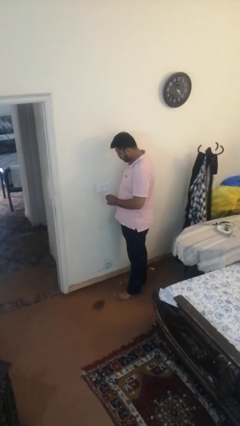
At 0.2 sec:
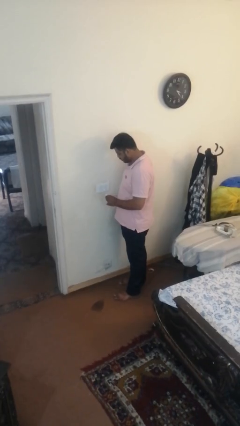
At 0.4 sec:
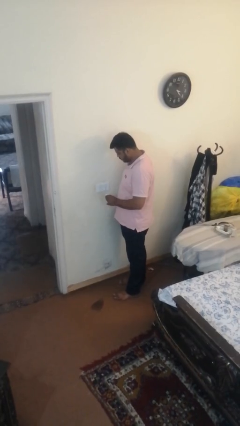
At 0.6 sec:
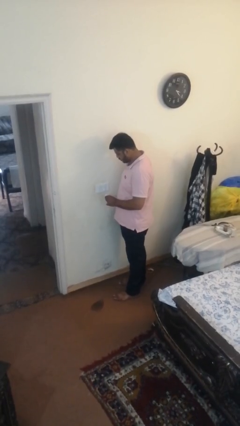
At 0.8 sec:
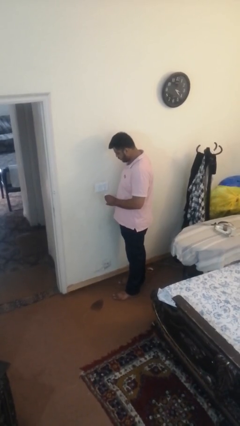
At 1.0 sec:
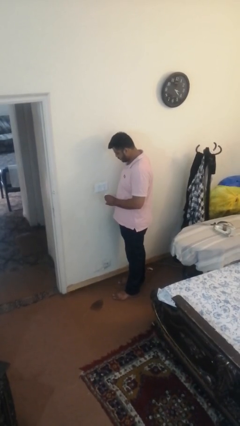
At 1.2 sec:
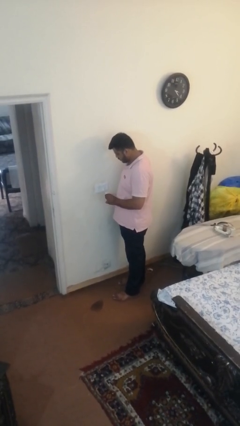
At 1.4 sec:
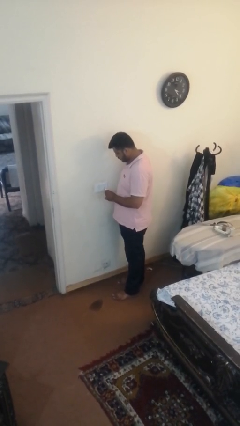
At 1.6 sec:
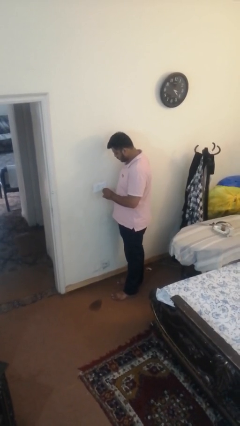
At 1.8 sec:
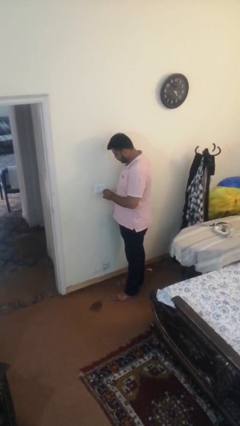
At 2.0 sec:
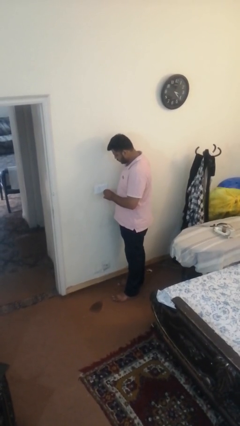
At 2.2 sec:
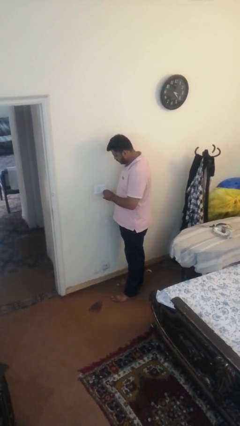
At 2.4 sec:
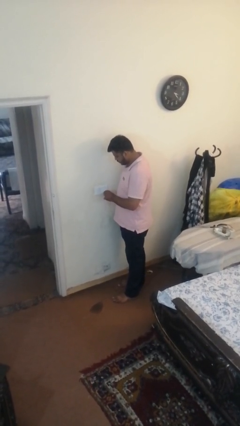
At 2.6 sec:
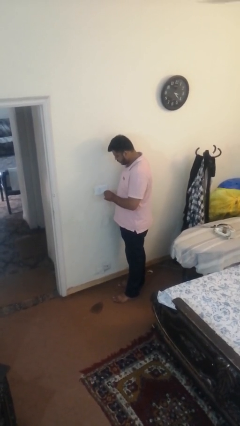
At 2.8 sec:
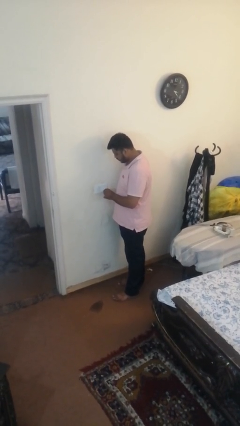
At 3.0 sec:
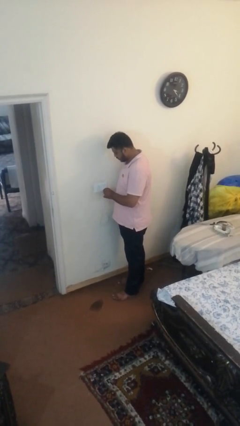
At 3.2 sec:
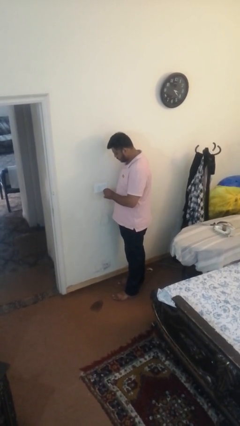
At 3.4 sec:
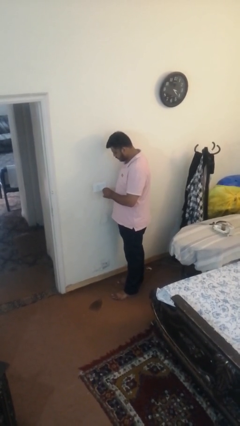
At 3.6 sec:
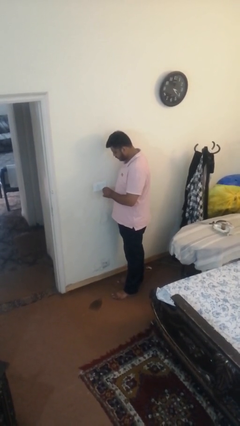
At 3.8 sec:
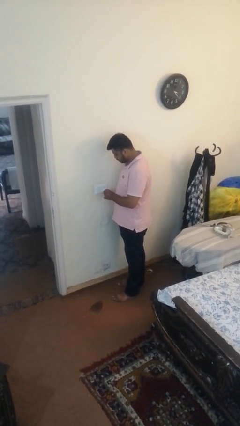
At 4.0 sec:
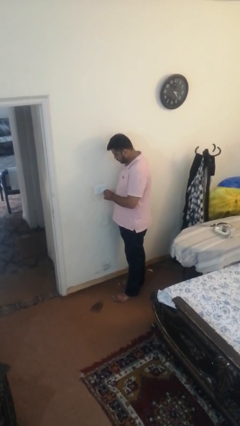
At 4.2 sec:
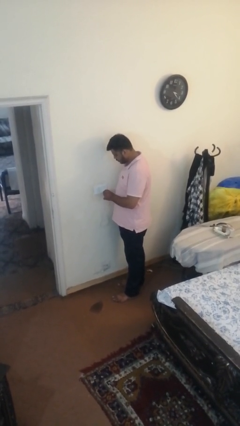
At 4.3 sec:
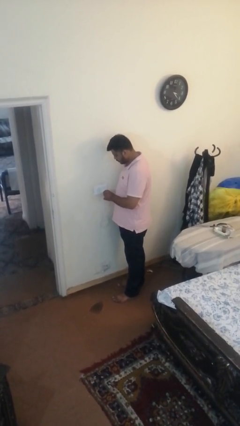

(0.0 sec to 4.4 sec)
person plugs into electrical socket

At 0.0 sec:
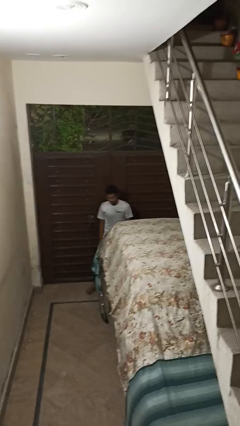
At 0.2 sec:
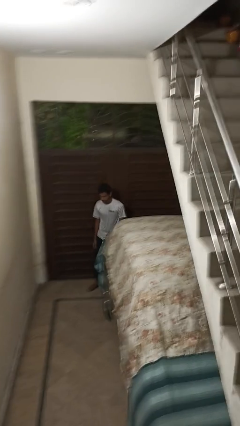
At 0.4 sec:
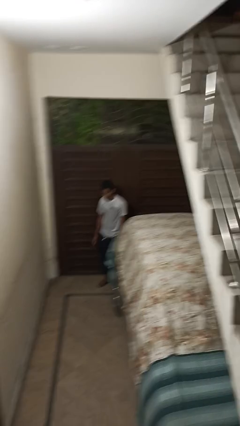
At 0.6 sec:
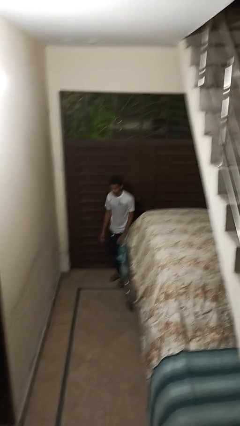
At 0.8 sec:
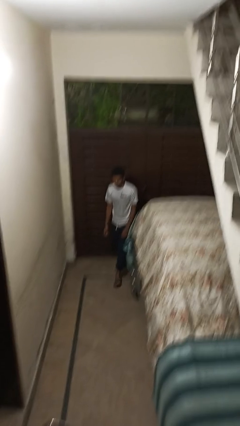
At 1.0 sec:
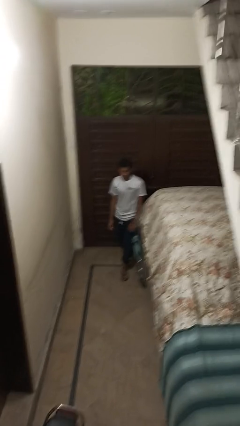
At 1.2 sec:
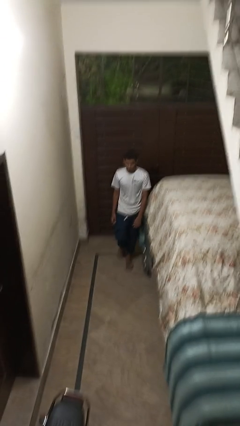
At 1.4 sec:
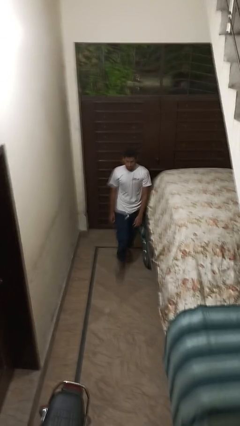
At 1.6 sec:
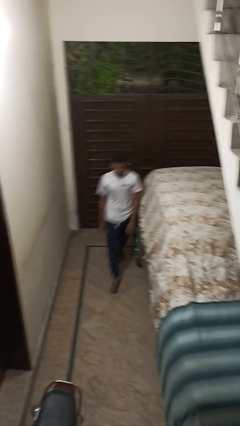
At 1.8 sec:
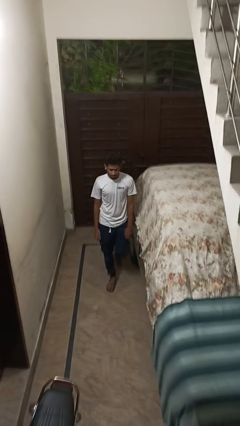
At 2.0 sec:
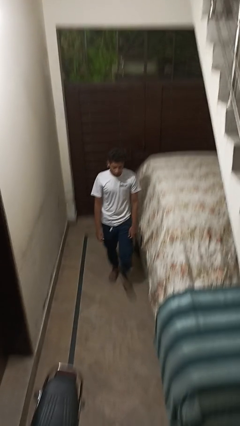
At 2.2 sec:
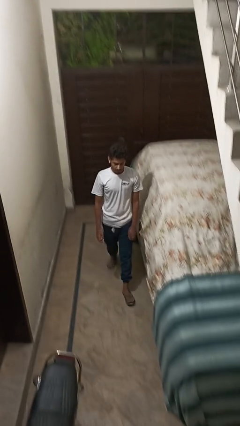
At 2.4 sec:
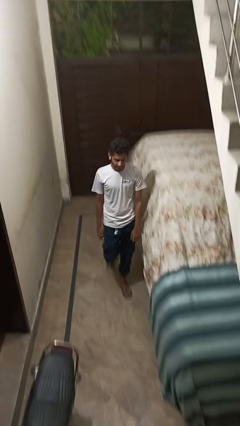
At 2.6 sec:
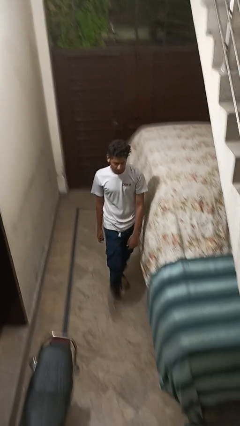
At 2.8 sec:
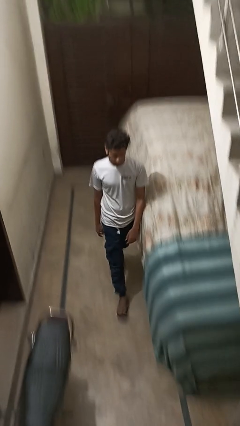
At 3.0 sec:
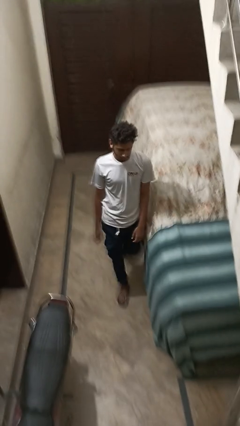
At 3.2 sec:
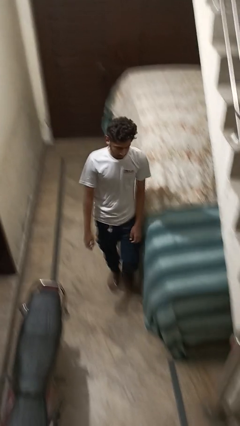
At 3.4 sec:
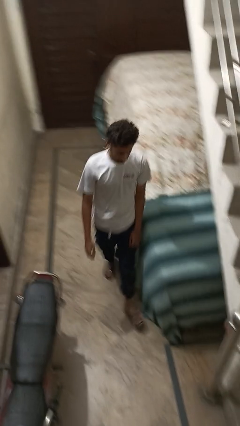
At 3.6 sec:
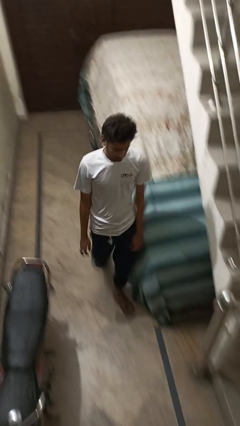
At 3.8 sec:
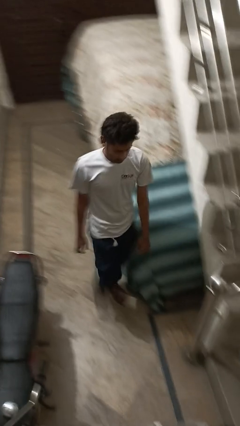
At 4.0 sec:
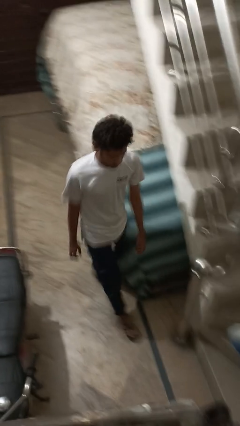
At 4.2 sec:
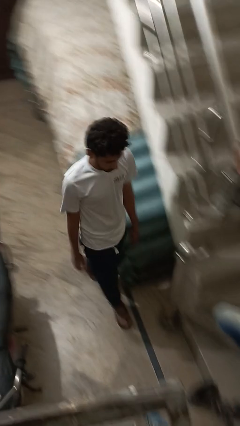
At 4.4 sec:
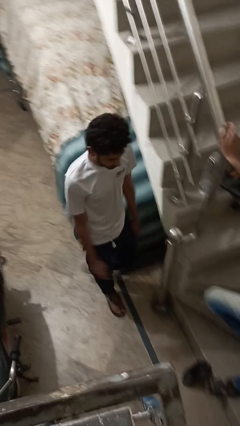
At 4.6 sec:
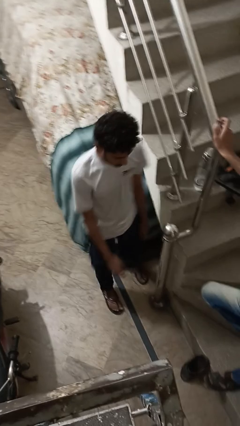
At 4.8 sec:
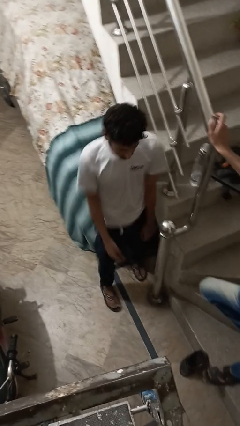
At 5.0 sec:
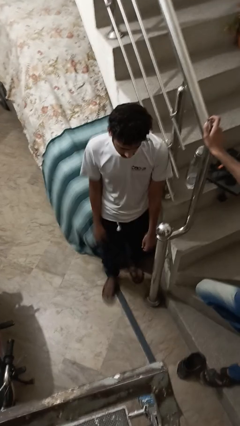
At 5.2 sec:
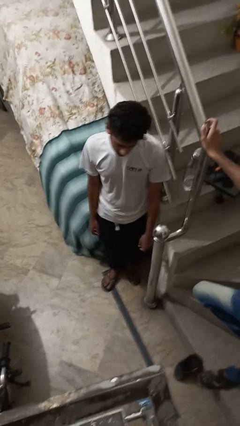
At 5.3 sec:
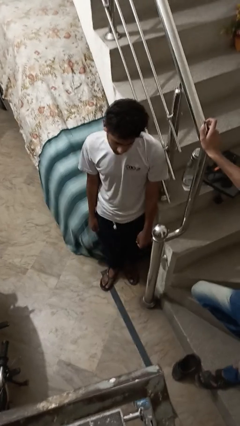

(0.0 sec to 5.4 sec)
person walks around car

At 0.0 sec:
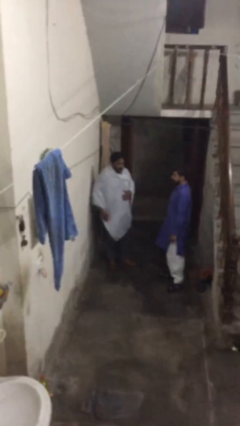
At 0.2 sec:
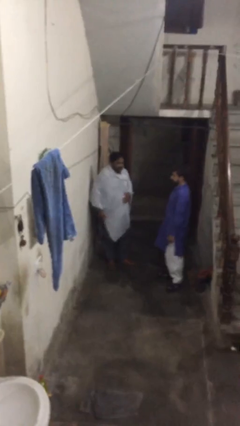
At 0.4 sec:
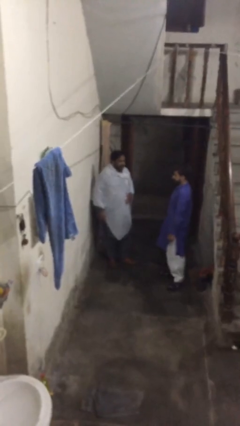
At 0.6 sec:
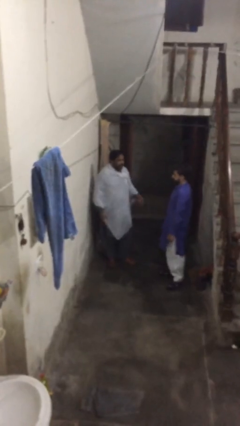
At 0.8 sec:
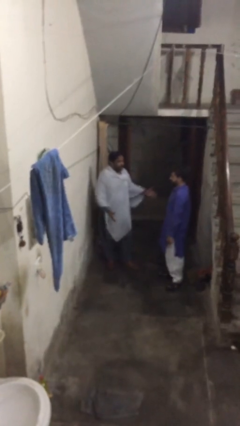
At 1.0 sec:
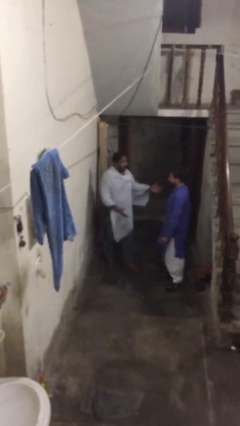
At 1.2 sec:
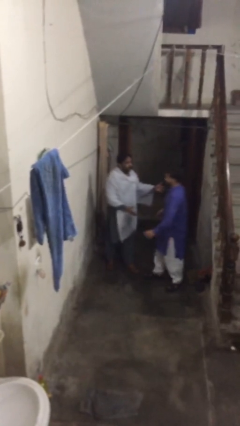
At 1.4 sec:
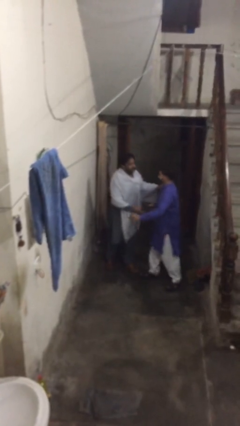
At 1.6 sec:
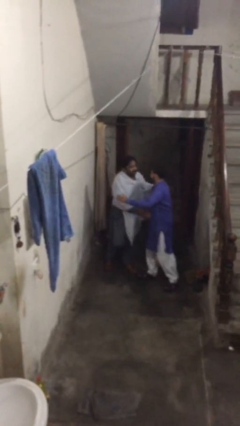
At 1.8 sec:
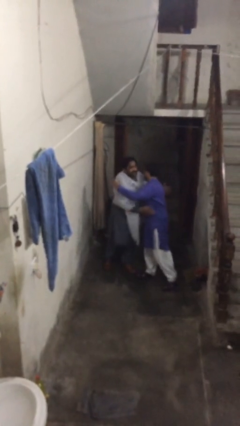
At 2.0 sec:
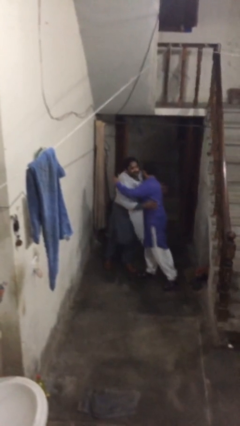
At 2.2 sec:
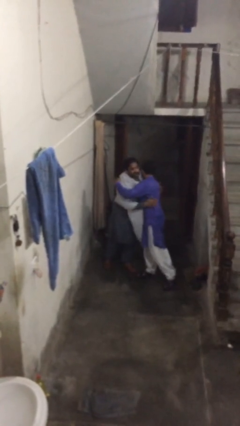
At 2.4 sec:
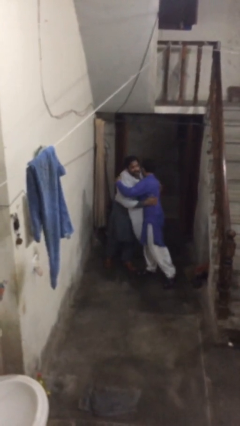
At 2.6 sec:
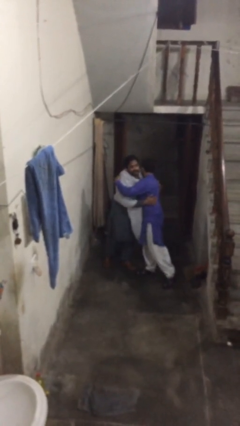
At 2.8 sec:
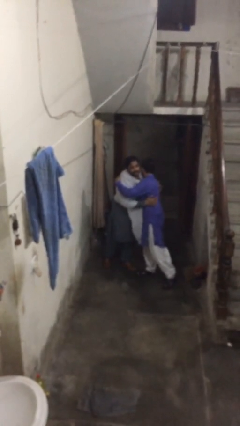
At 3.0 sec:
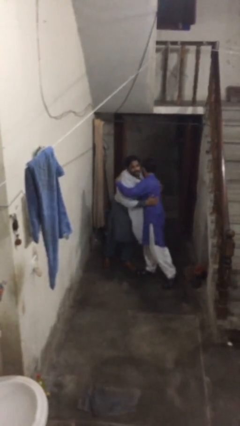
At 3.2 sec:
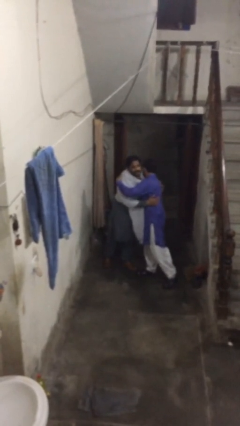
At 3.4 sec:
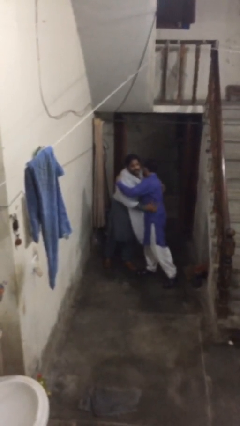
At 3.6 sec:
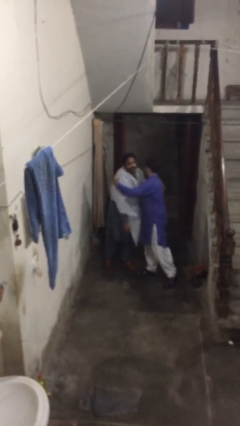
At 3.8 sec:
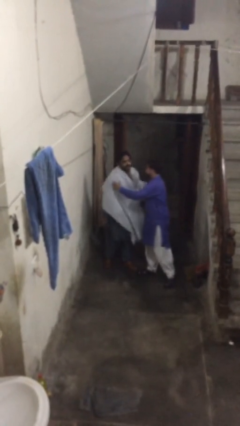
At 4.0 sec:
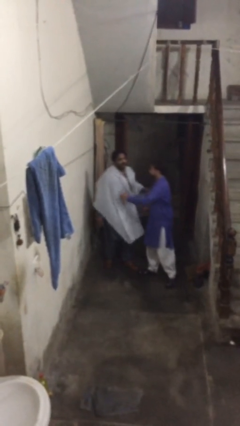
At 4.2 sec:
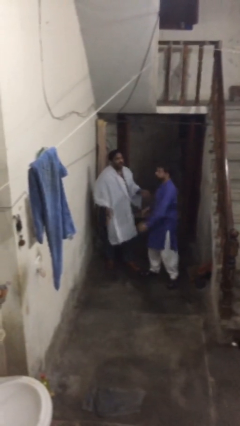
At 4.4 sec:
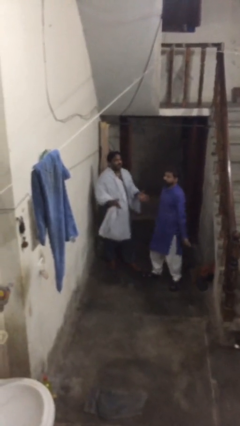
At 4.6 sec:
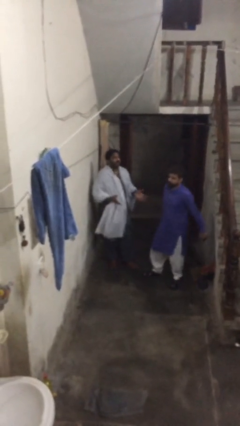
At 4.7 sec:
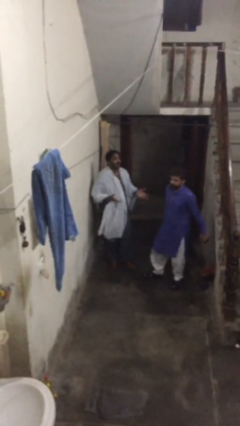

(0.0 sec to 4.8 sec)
person embraces person

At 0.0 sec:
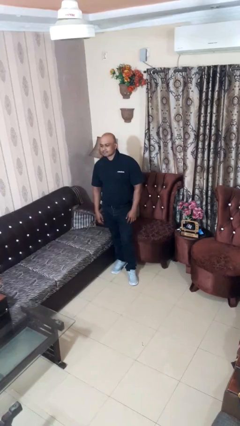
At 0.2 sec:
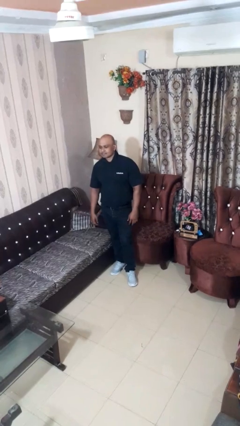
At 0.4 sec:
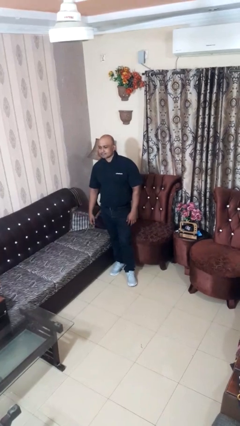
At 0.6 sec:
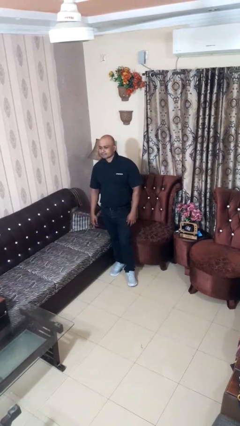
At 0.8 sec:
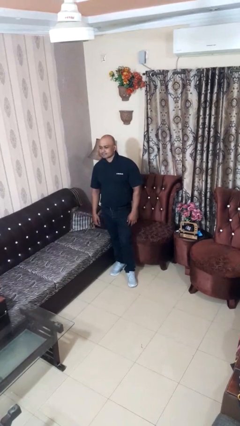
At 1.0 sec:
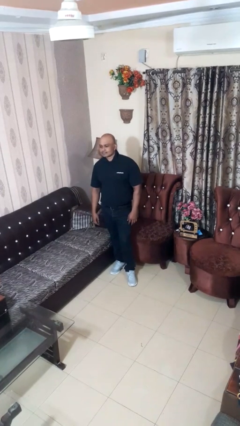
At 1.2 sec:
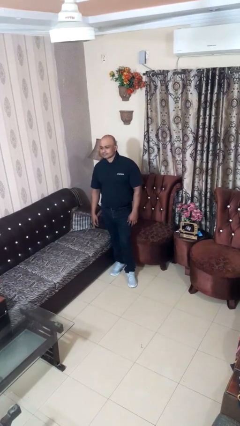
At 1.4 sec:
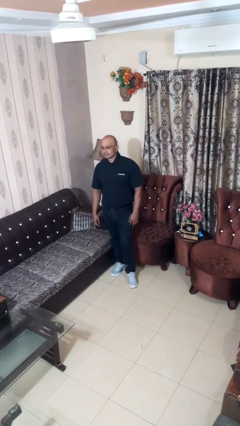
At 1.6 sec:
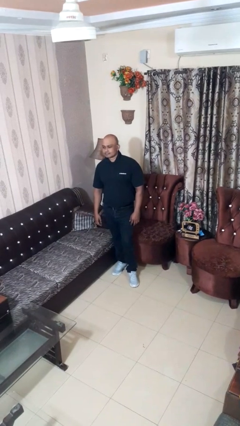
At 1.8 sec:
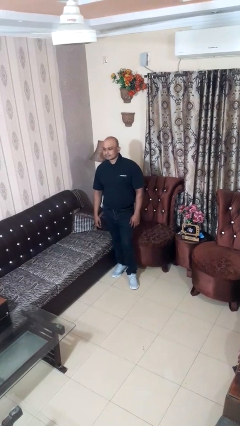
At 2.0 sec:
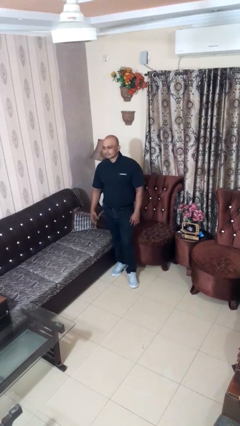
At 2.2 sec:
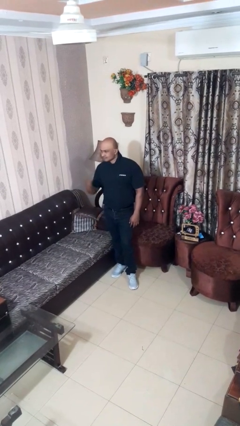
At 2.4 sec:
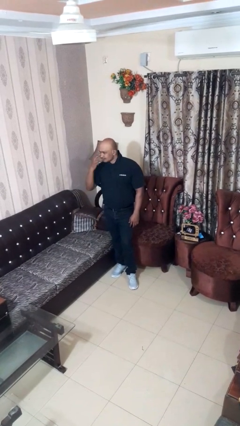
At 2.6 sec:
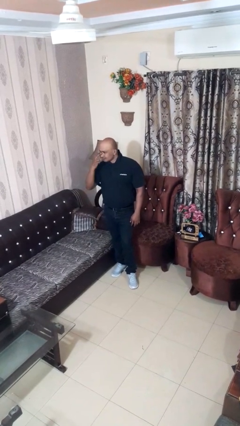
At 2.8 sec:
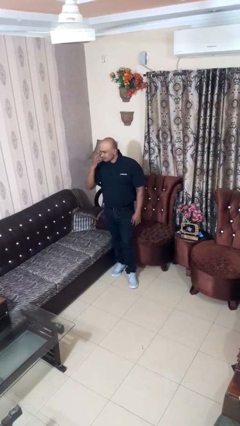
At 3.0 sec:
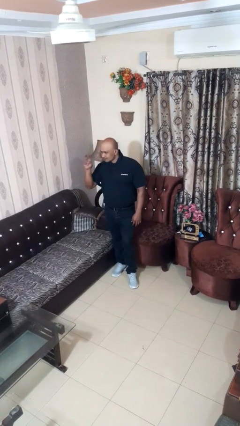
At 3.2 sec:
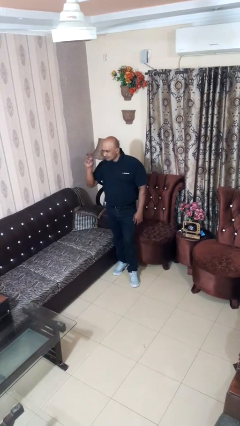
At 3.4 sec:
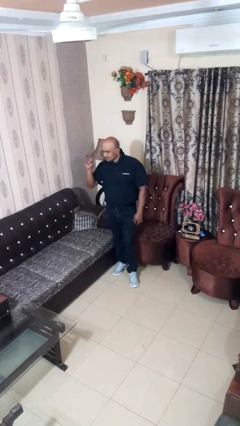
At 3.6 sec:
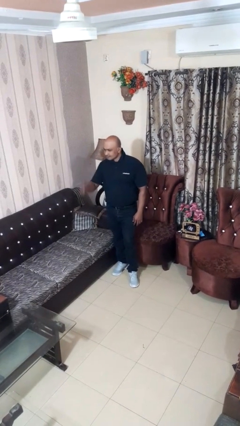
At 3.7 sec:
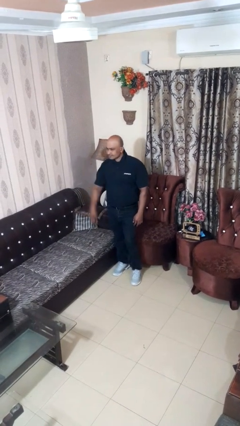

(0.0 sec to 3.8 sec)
person gestures watch closely
